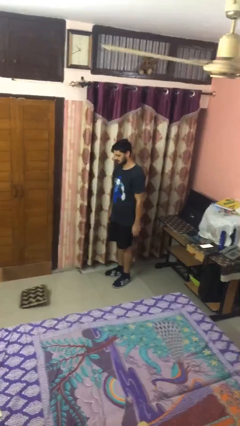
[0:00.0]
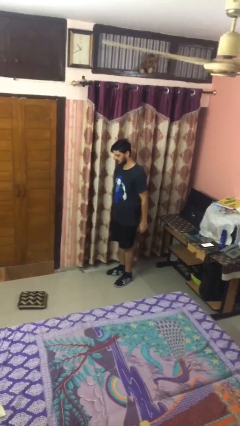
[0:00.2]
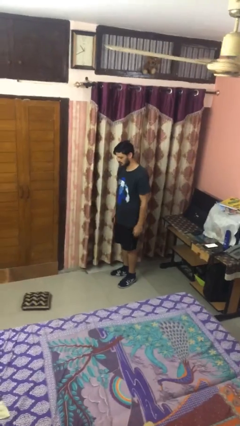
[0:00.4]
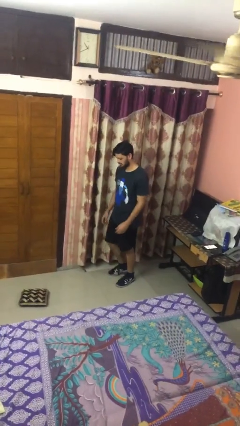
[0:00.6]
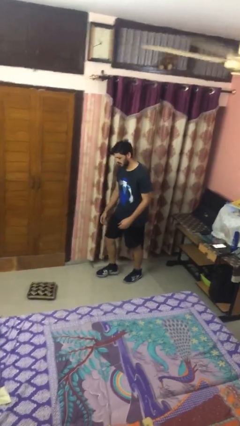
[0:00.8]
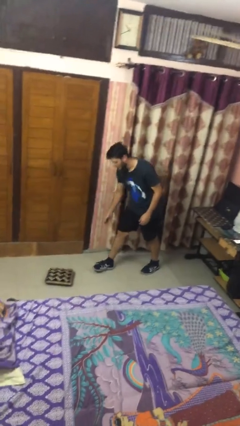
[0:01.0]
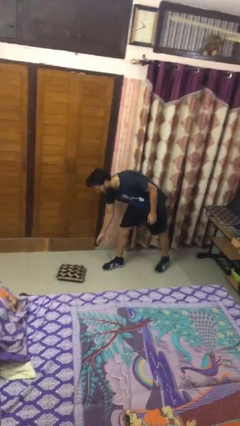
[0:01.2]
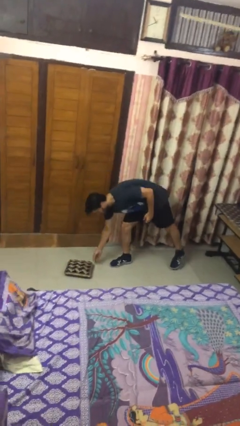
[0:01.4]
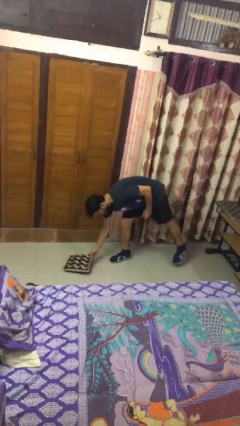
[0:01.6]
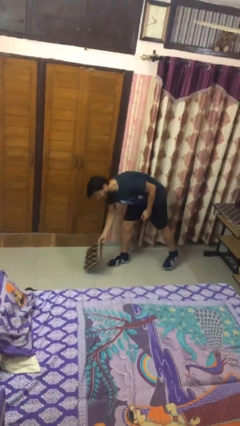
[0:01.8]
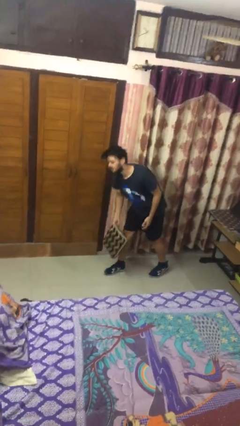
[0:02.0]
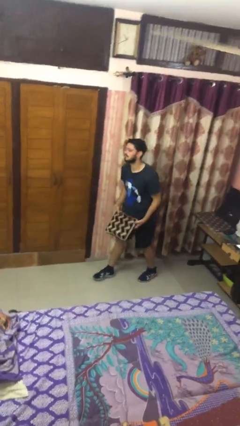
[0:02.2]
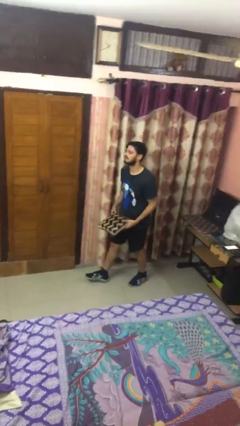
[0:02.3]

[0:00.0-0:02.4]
person picks up object from floor

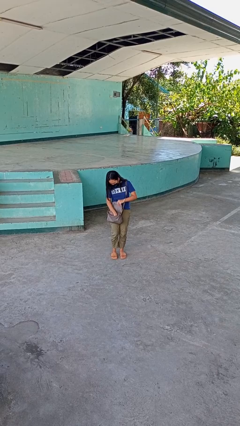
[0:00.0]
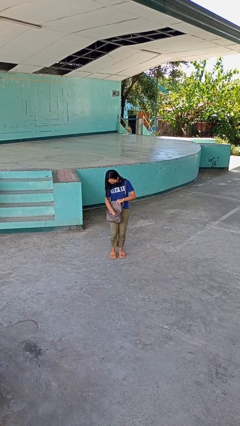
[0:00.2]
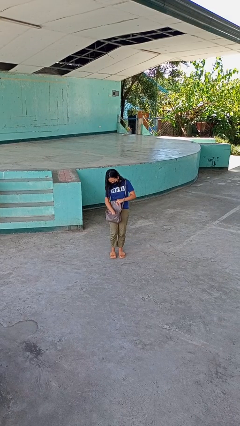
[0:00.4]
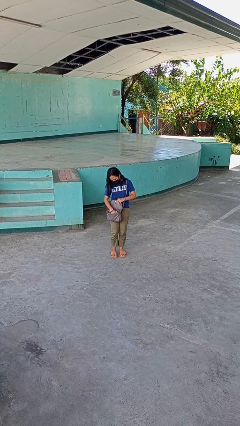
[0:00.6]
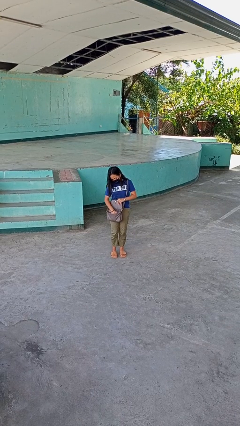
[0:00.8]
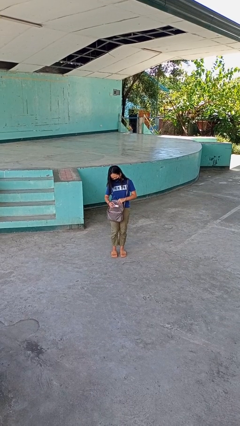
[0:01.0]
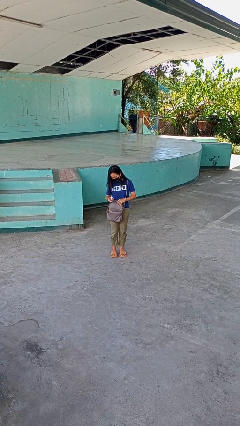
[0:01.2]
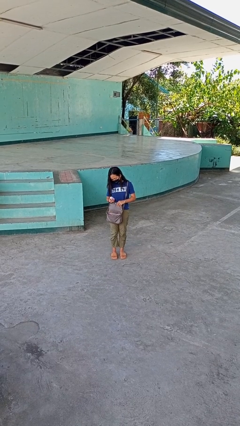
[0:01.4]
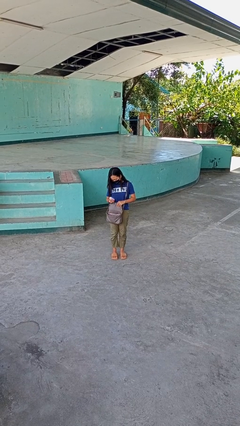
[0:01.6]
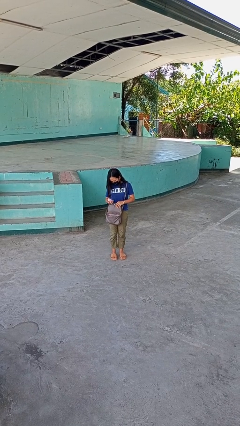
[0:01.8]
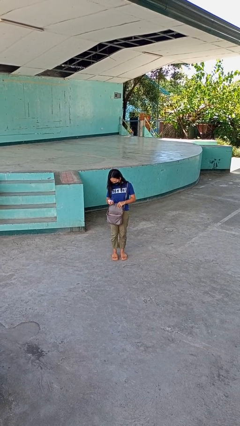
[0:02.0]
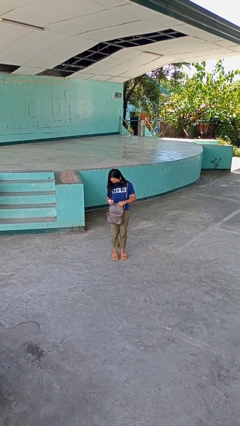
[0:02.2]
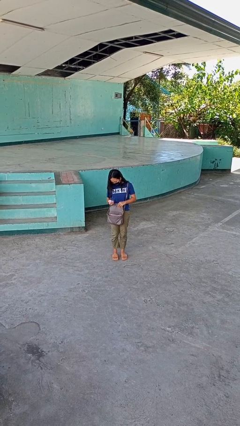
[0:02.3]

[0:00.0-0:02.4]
person takes object from purse

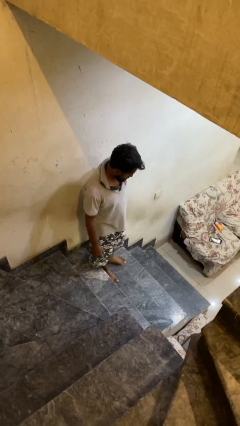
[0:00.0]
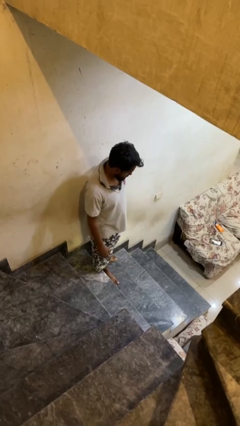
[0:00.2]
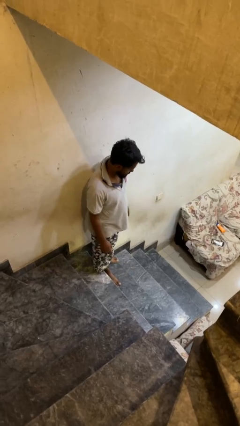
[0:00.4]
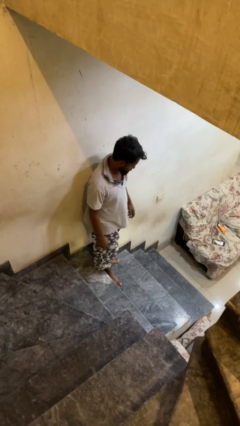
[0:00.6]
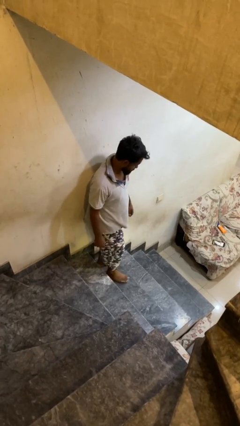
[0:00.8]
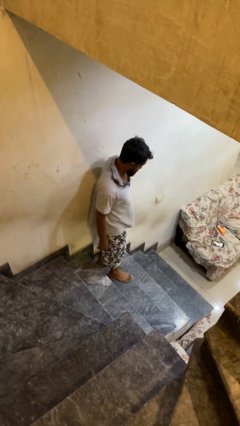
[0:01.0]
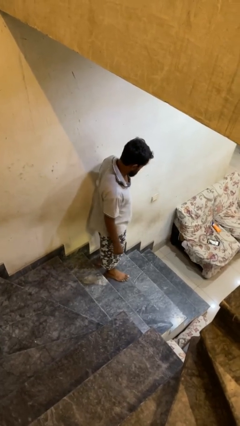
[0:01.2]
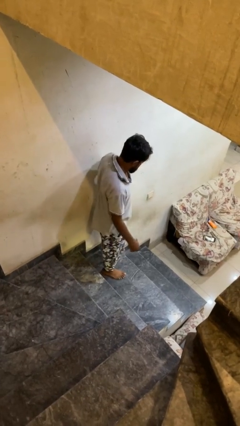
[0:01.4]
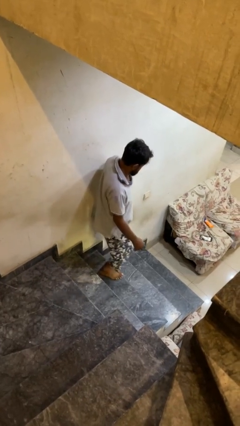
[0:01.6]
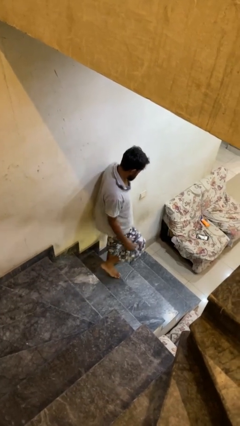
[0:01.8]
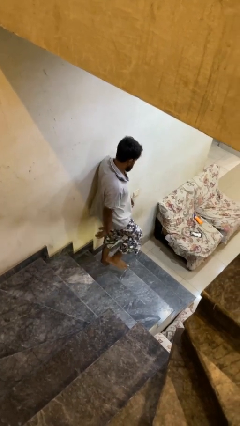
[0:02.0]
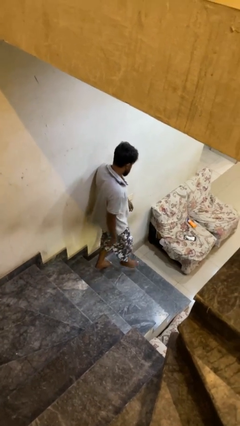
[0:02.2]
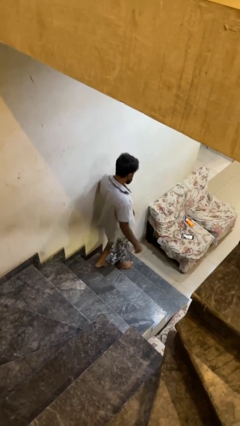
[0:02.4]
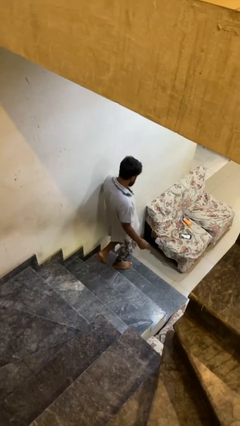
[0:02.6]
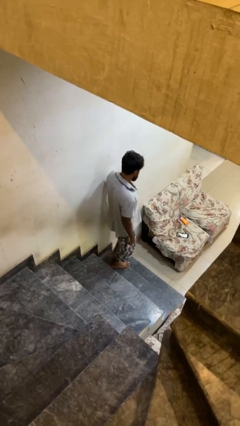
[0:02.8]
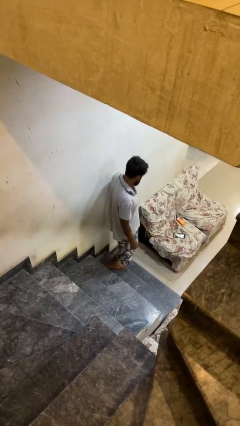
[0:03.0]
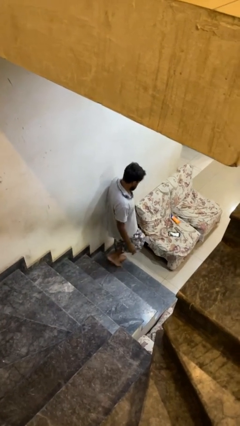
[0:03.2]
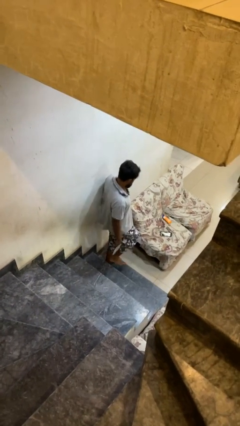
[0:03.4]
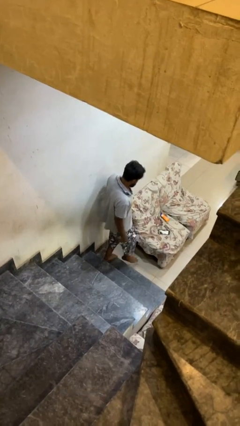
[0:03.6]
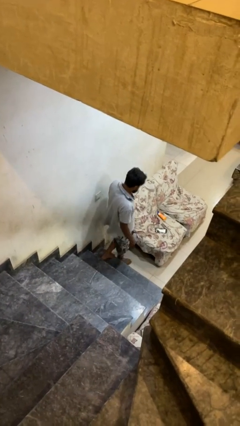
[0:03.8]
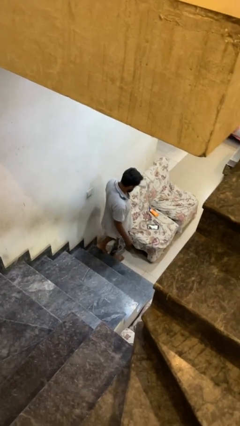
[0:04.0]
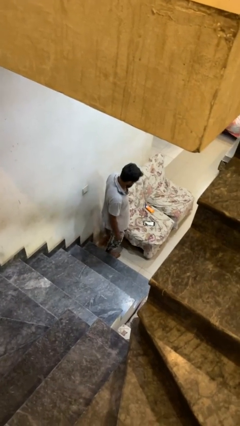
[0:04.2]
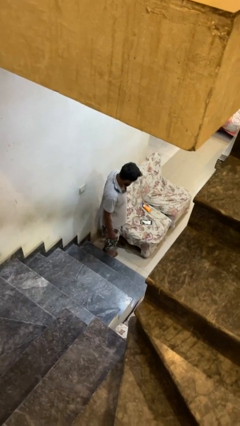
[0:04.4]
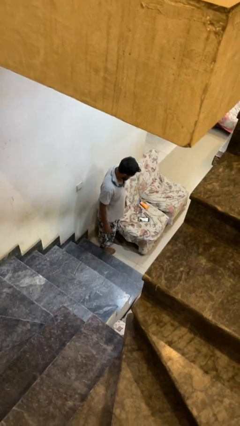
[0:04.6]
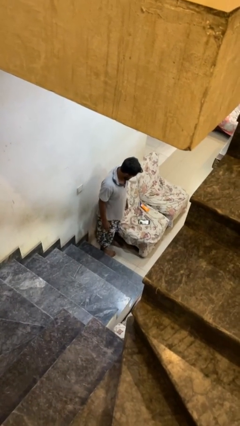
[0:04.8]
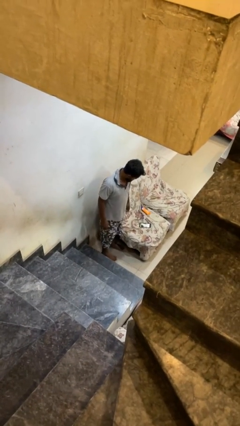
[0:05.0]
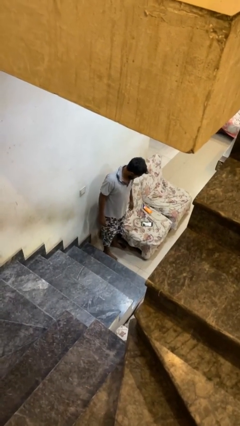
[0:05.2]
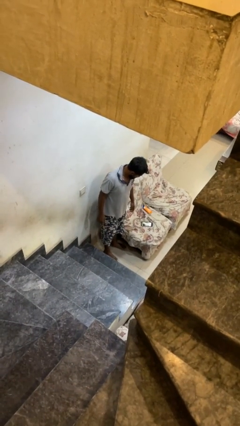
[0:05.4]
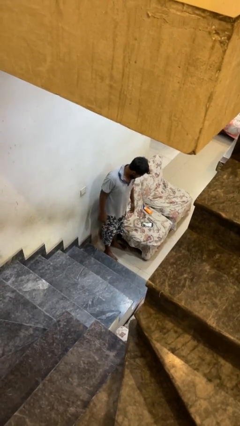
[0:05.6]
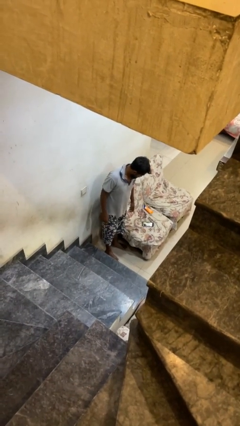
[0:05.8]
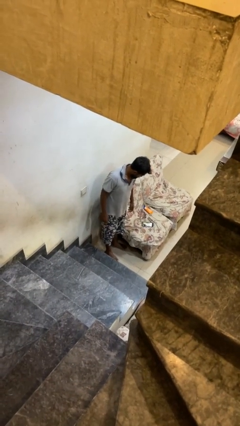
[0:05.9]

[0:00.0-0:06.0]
person climbs down stairs

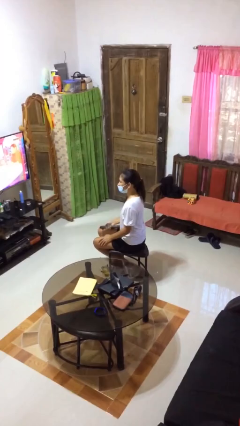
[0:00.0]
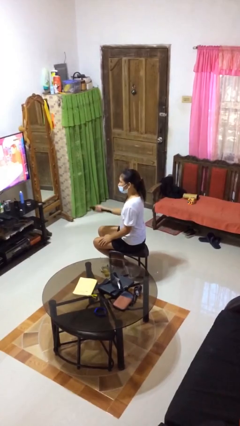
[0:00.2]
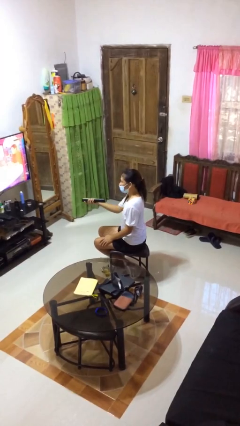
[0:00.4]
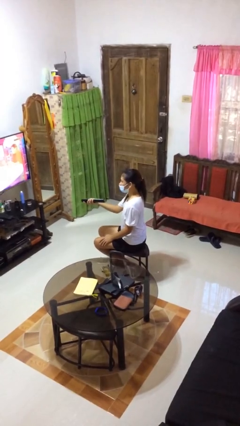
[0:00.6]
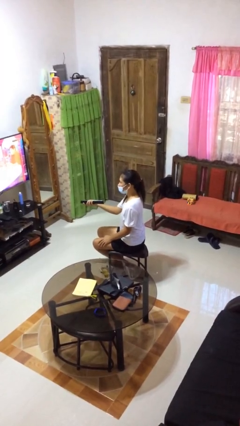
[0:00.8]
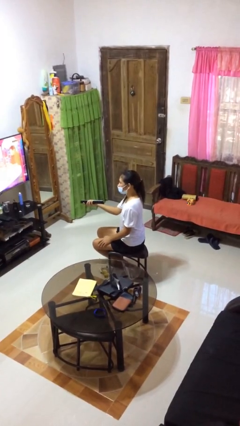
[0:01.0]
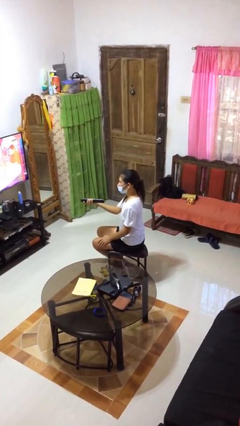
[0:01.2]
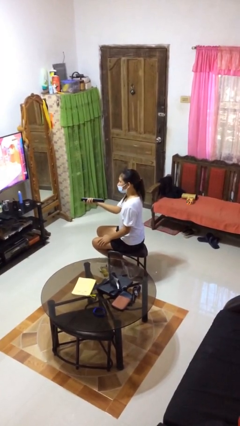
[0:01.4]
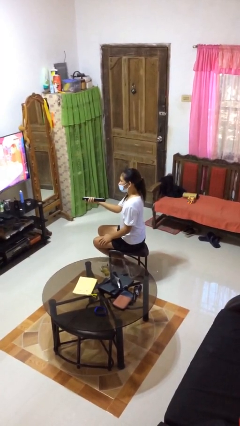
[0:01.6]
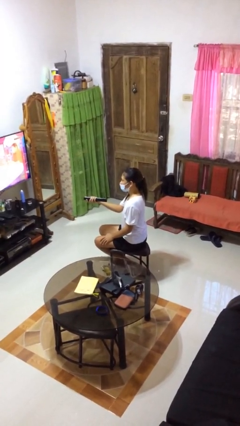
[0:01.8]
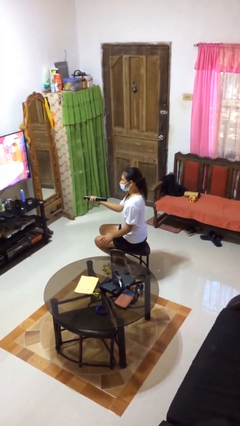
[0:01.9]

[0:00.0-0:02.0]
person uses television remote

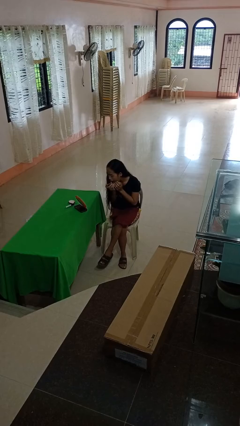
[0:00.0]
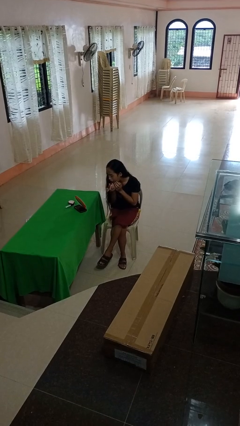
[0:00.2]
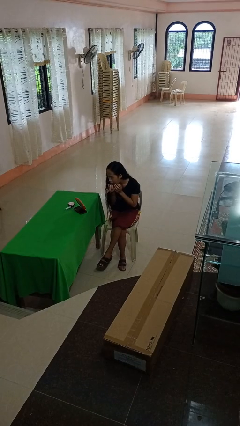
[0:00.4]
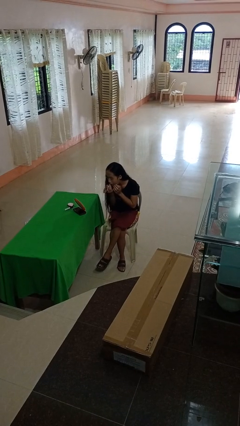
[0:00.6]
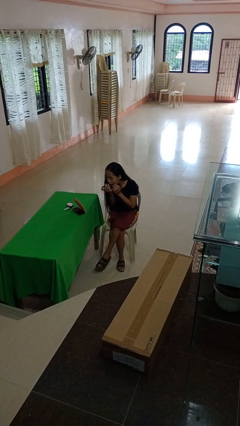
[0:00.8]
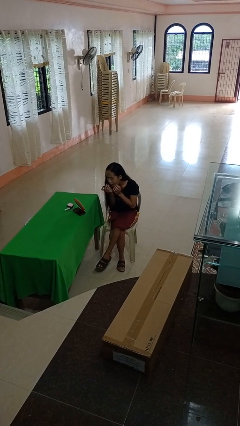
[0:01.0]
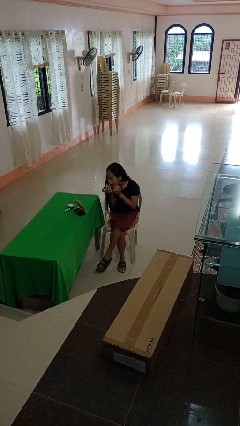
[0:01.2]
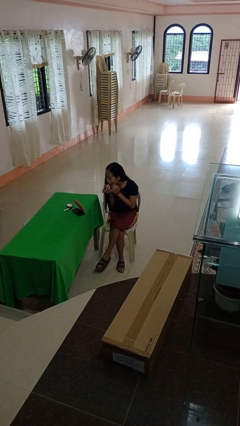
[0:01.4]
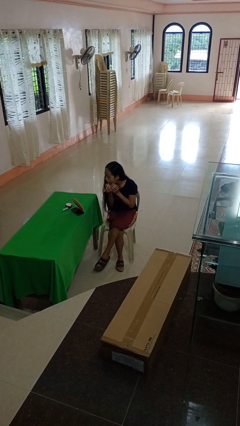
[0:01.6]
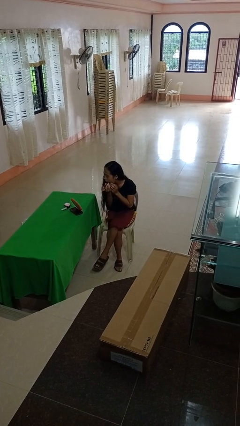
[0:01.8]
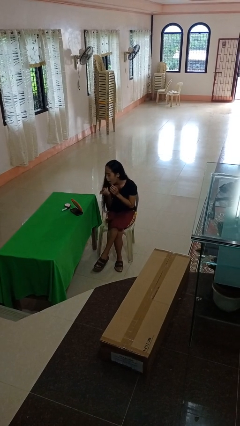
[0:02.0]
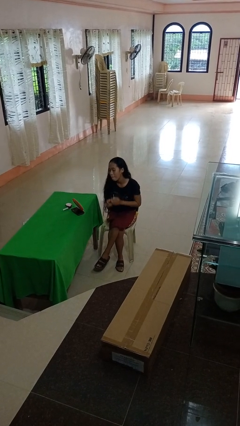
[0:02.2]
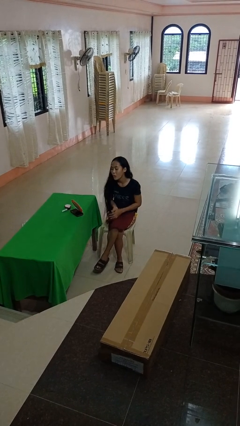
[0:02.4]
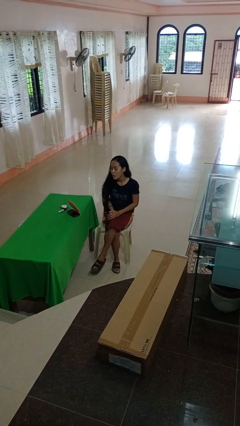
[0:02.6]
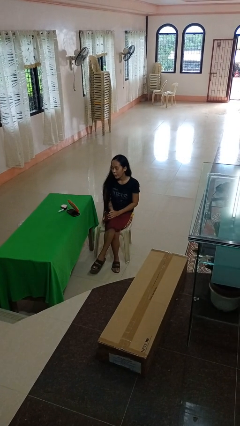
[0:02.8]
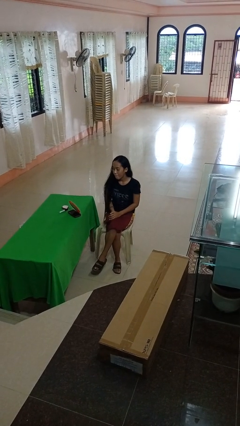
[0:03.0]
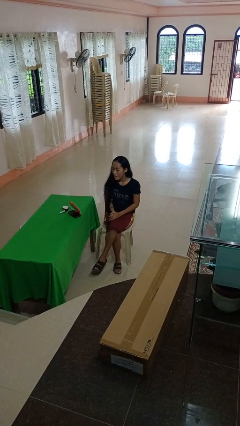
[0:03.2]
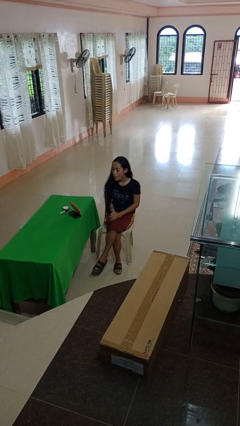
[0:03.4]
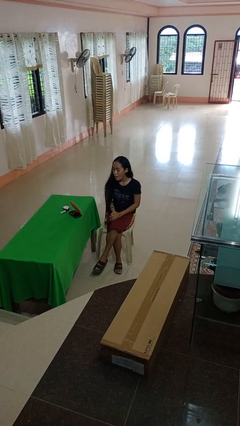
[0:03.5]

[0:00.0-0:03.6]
person applies lip makeup

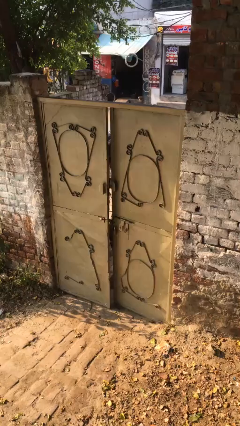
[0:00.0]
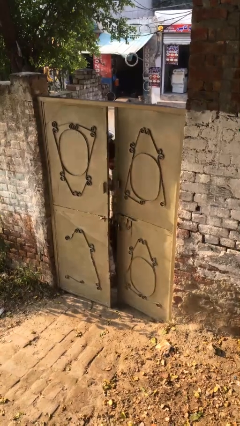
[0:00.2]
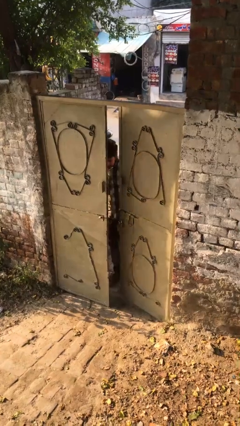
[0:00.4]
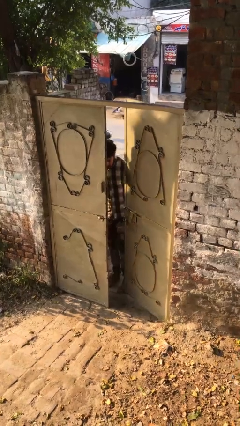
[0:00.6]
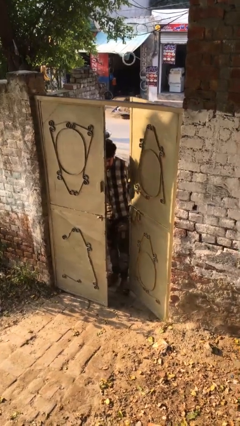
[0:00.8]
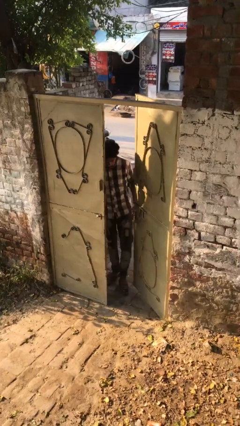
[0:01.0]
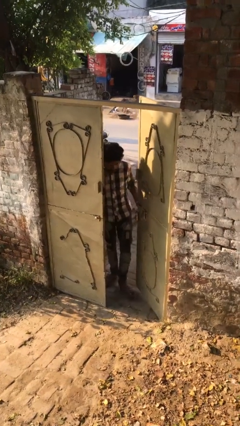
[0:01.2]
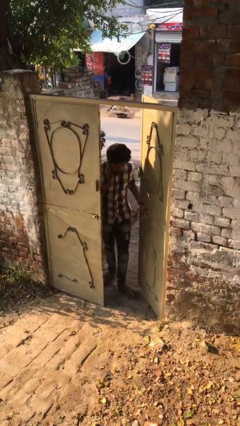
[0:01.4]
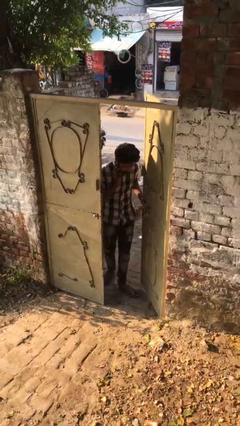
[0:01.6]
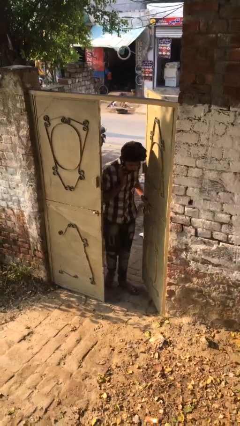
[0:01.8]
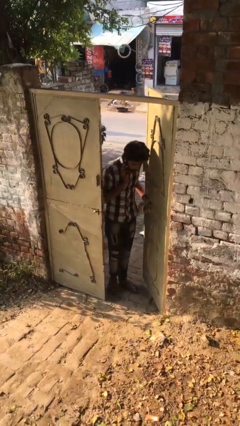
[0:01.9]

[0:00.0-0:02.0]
person opens facility door
